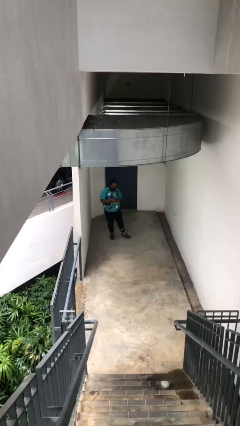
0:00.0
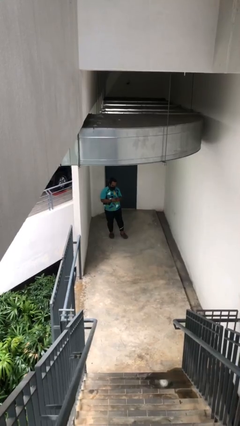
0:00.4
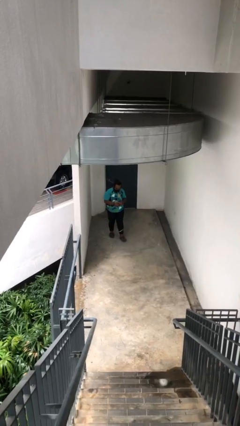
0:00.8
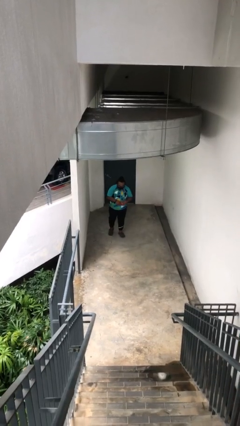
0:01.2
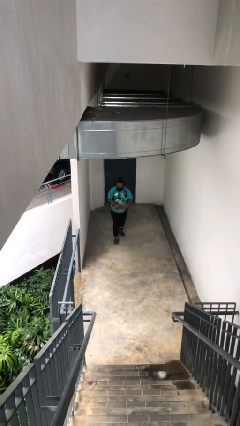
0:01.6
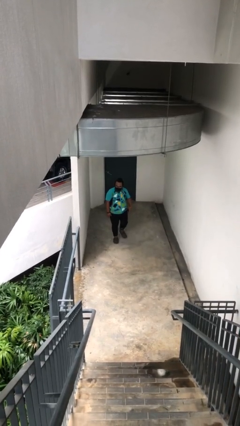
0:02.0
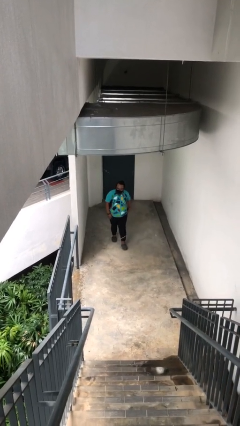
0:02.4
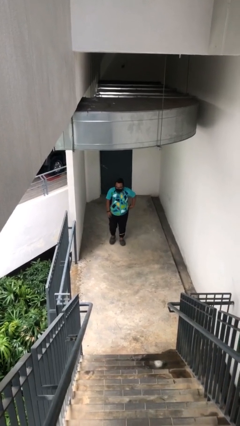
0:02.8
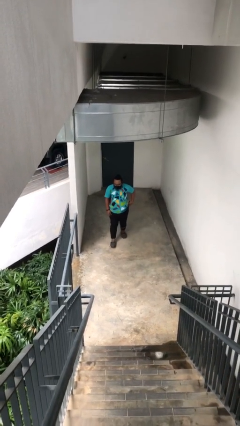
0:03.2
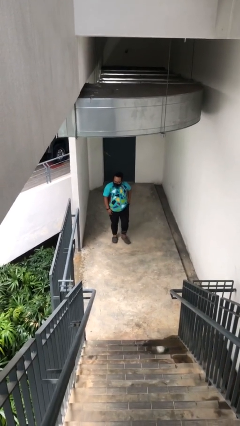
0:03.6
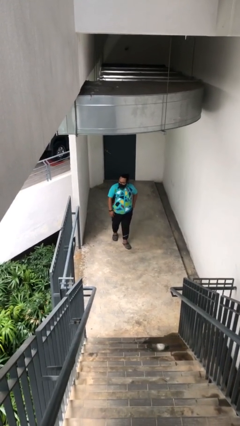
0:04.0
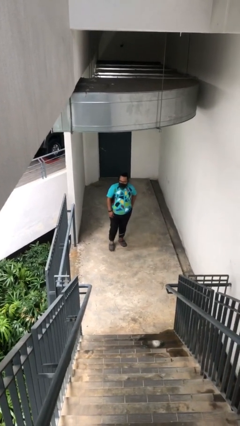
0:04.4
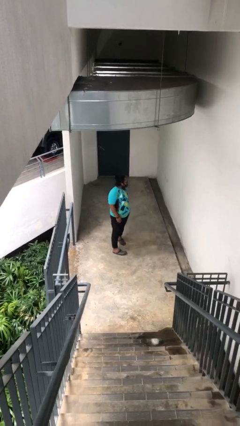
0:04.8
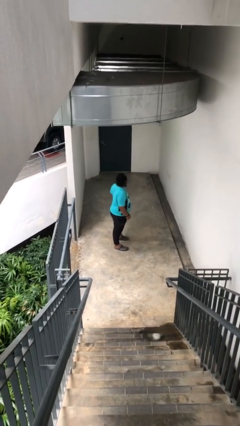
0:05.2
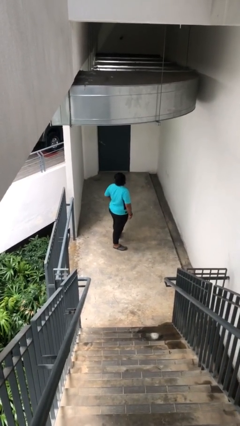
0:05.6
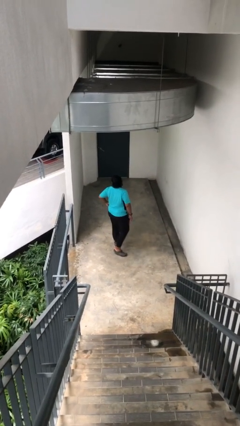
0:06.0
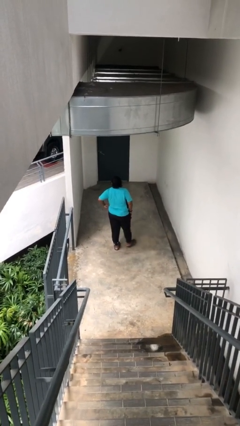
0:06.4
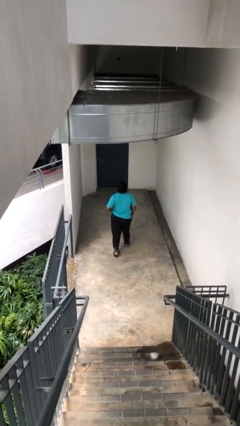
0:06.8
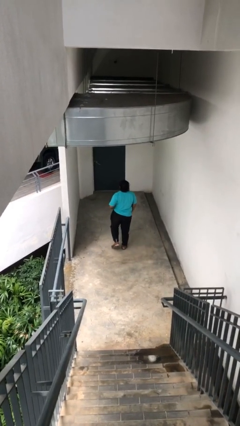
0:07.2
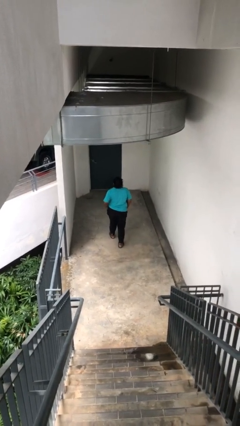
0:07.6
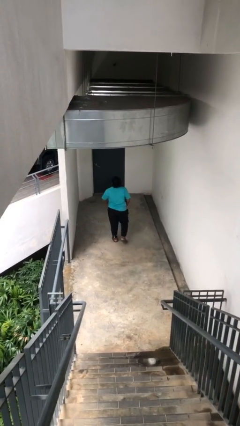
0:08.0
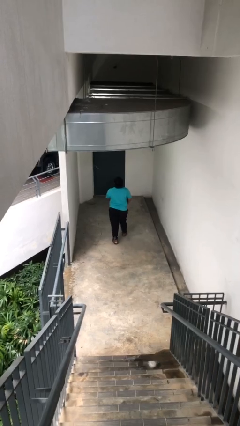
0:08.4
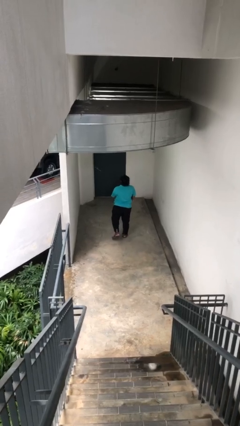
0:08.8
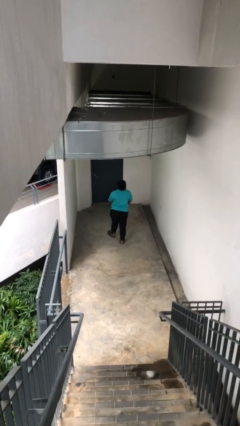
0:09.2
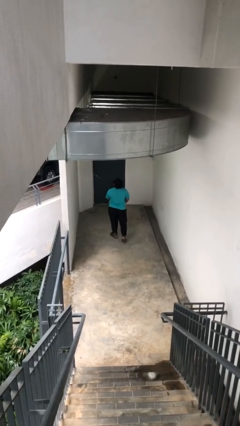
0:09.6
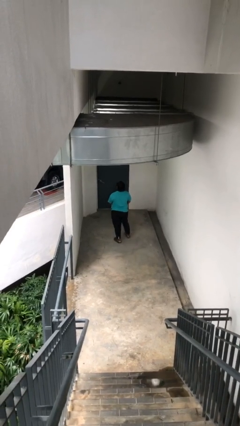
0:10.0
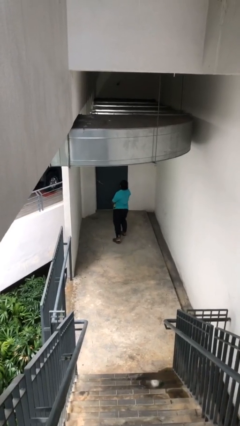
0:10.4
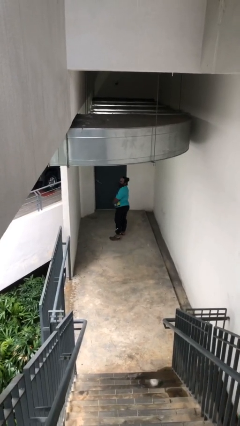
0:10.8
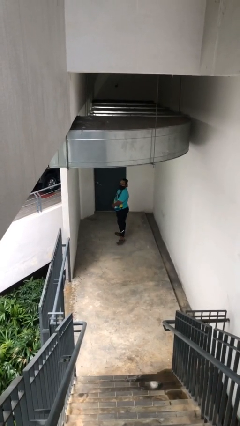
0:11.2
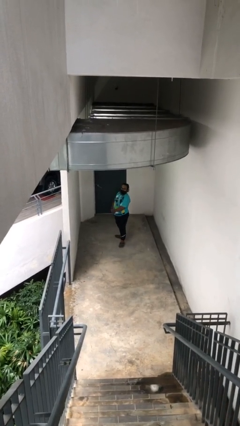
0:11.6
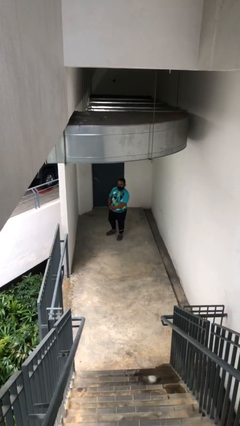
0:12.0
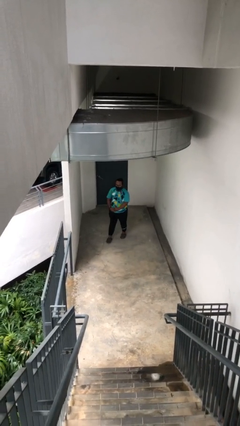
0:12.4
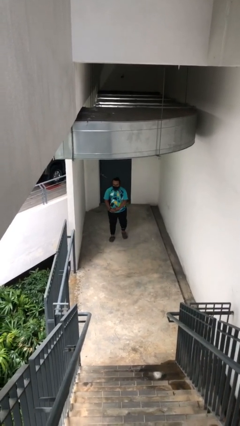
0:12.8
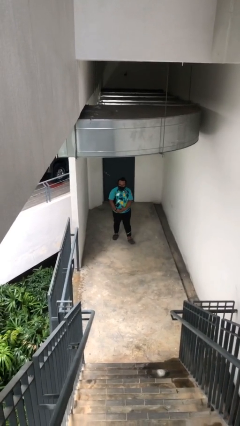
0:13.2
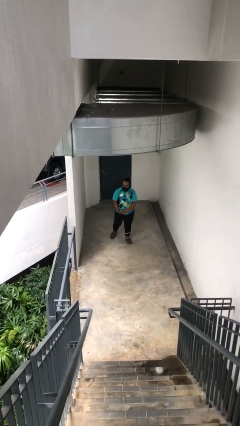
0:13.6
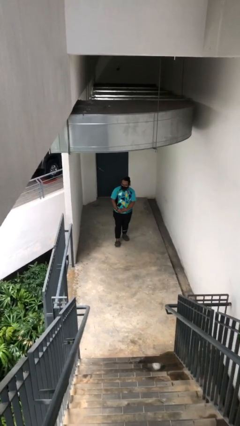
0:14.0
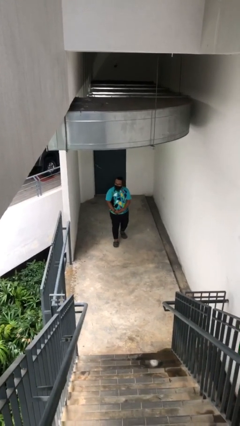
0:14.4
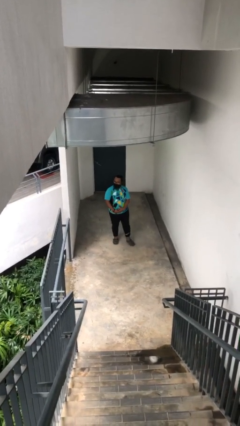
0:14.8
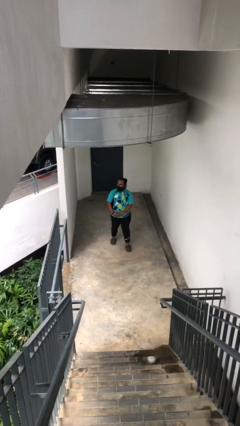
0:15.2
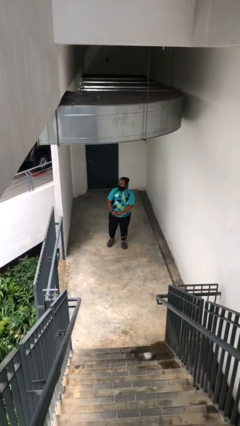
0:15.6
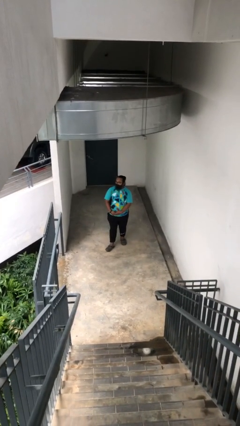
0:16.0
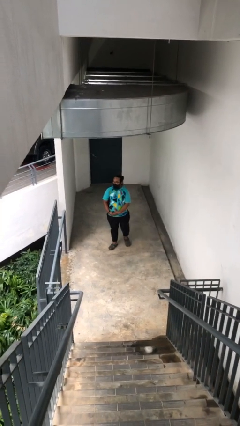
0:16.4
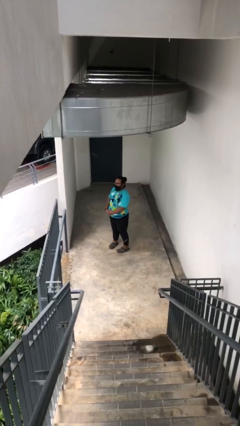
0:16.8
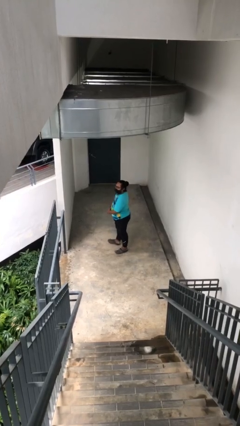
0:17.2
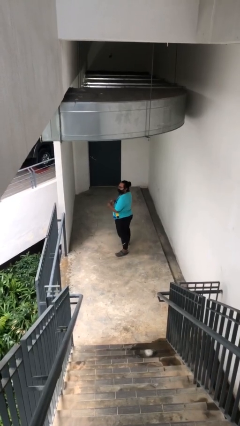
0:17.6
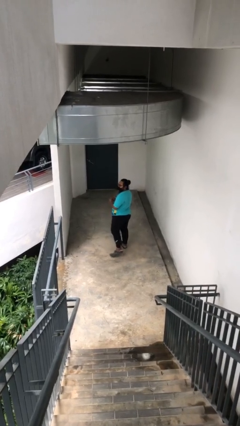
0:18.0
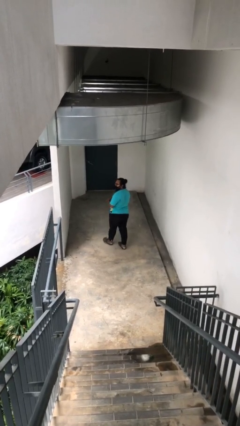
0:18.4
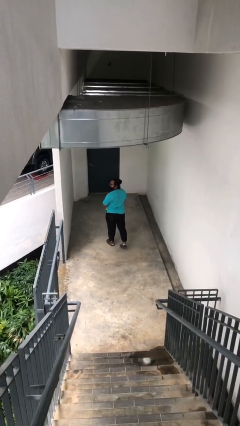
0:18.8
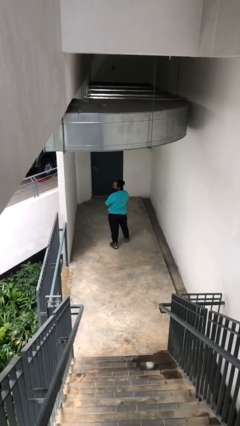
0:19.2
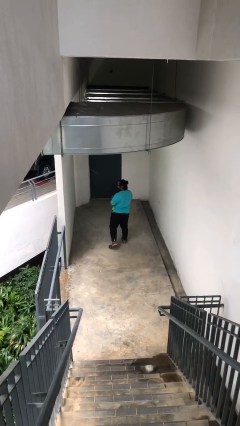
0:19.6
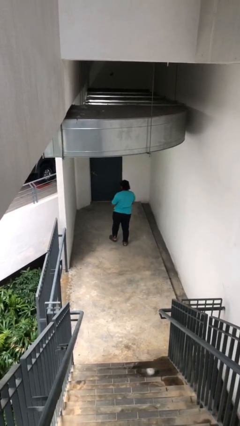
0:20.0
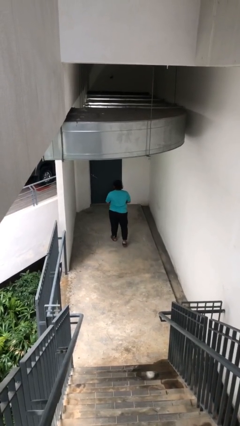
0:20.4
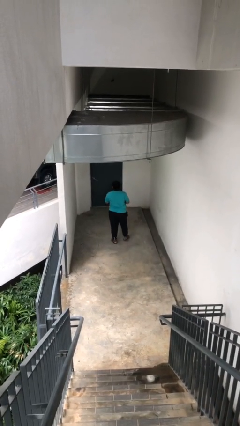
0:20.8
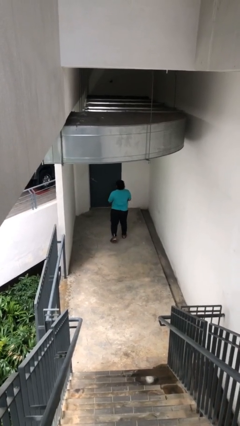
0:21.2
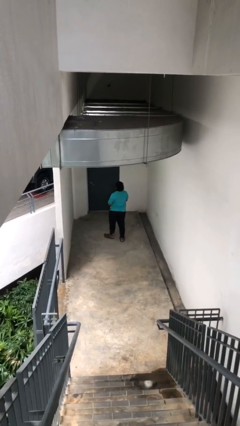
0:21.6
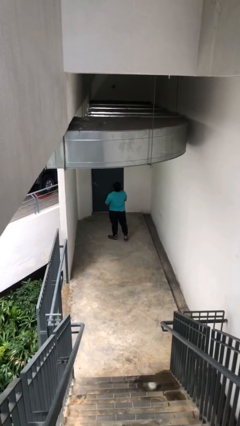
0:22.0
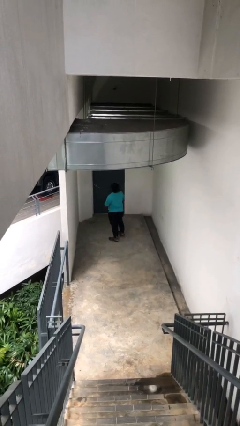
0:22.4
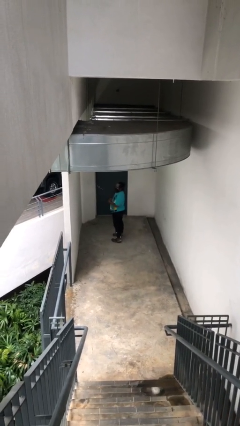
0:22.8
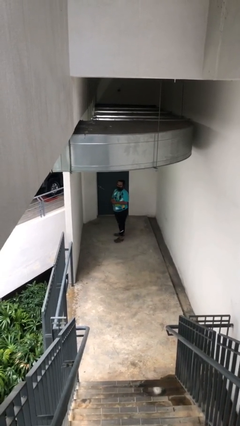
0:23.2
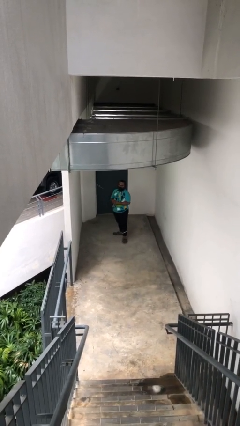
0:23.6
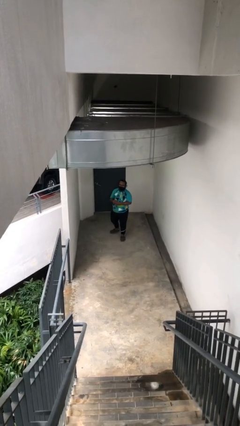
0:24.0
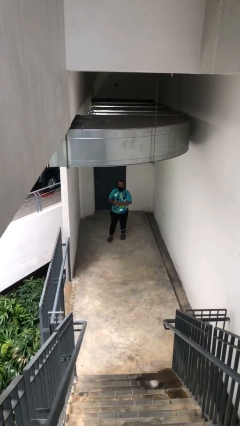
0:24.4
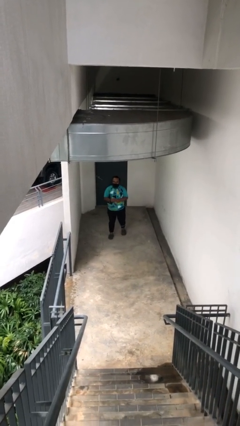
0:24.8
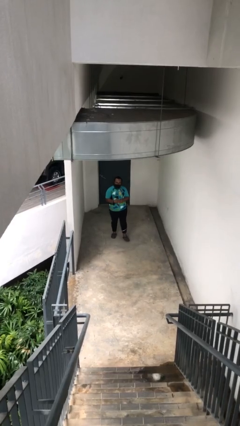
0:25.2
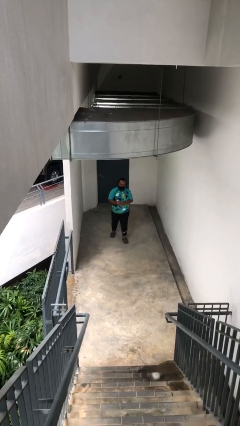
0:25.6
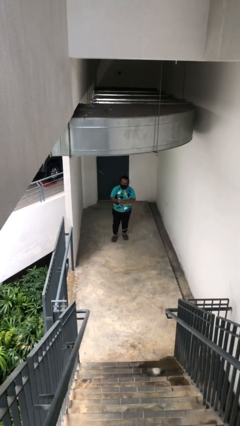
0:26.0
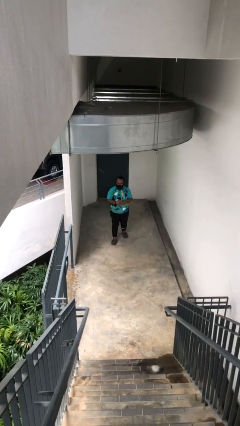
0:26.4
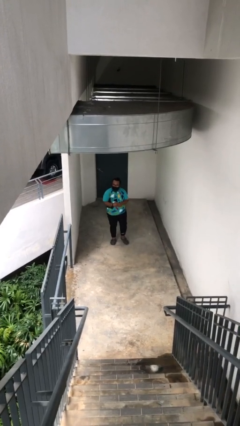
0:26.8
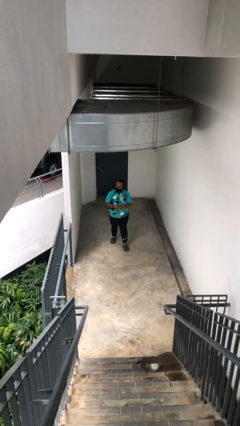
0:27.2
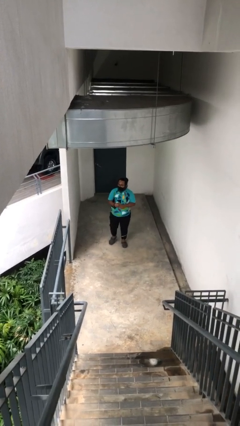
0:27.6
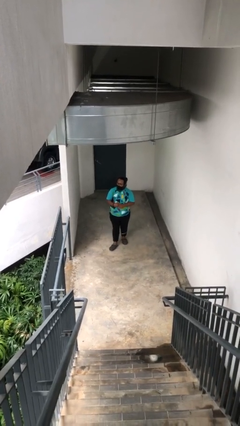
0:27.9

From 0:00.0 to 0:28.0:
person walks

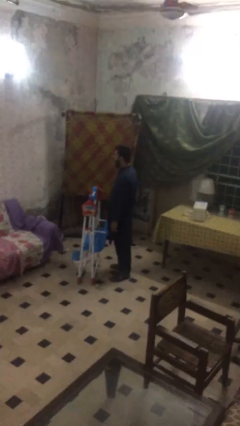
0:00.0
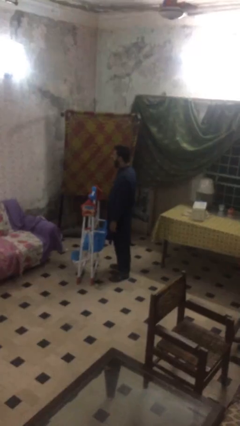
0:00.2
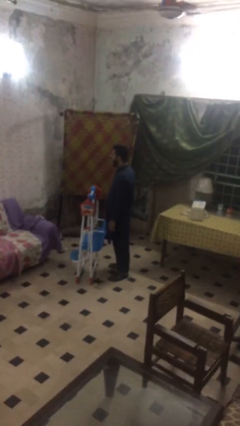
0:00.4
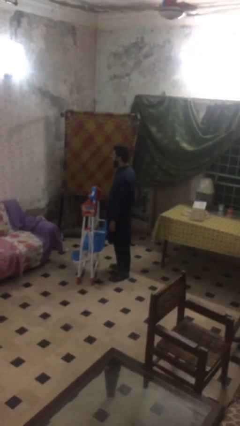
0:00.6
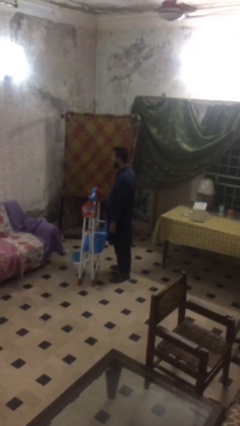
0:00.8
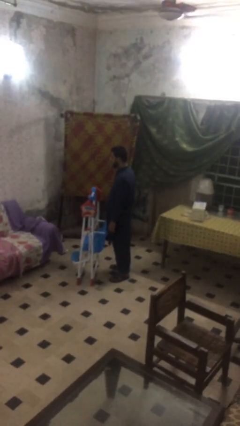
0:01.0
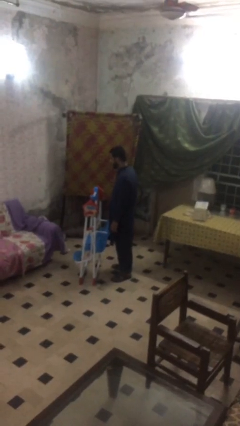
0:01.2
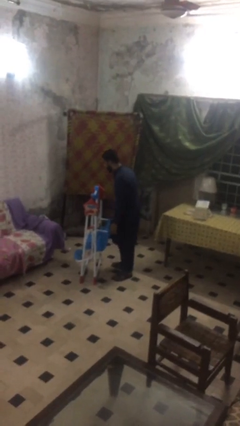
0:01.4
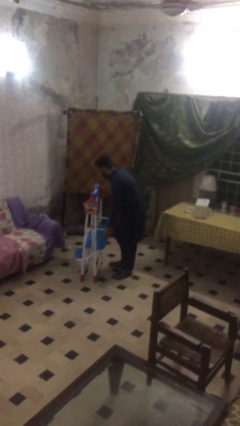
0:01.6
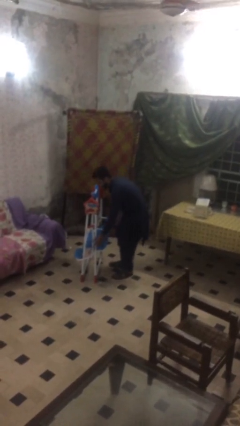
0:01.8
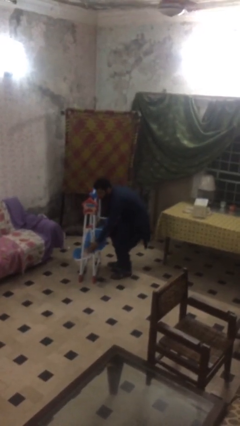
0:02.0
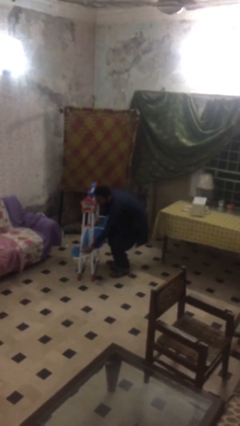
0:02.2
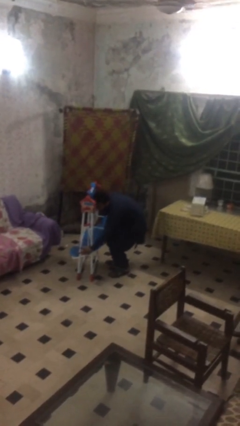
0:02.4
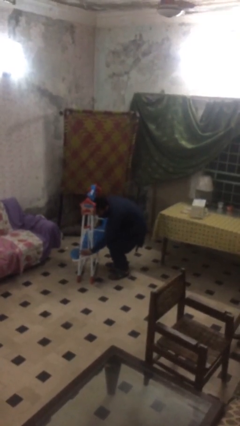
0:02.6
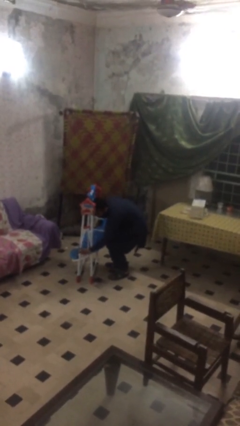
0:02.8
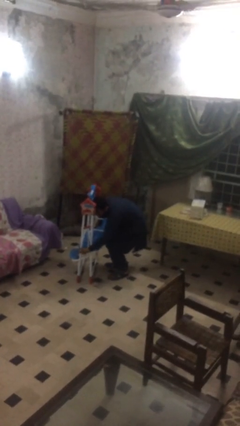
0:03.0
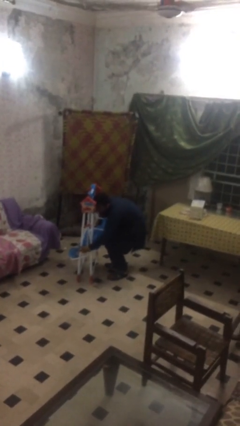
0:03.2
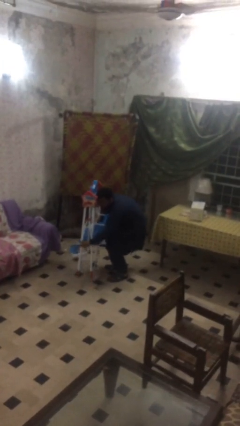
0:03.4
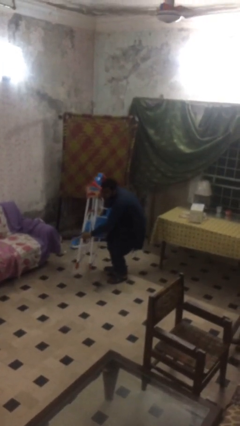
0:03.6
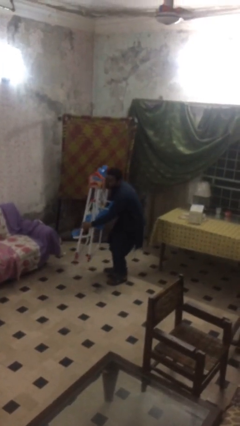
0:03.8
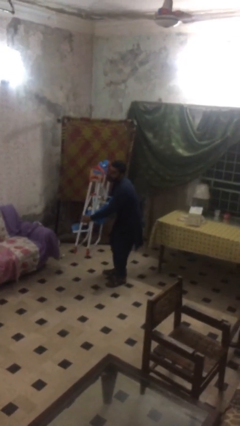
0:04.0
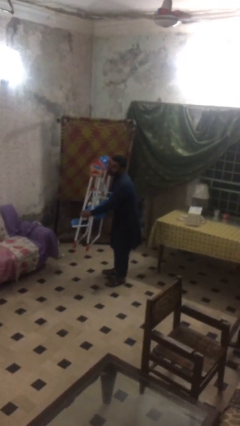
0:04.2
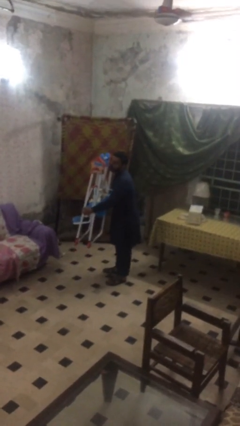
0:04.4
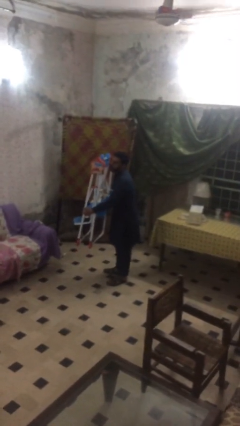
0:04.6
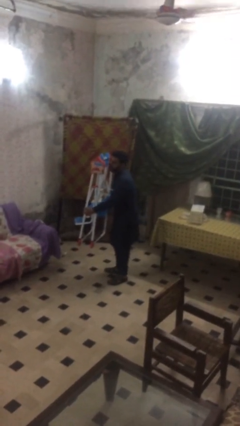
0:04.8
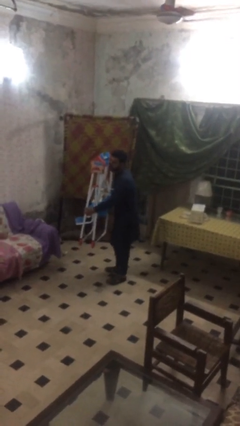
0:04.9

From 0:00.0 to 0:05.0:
person picks up object from floor
